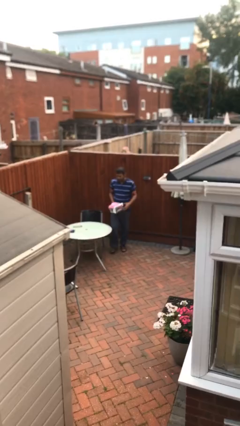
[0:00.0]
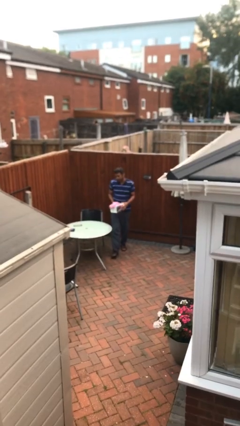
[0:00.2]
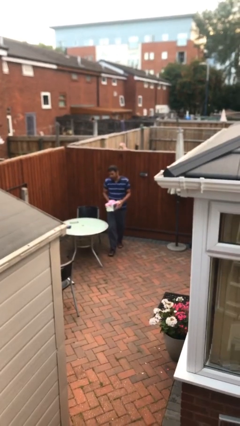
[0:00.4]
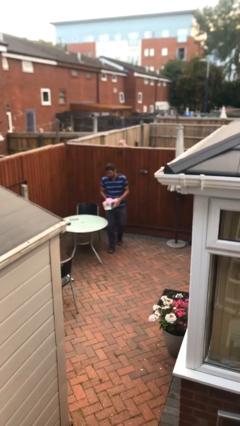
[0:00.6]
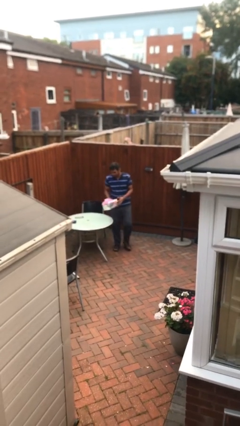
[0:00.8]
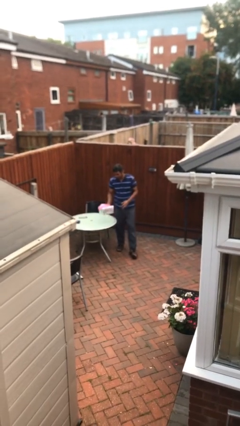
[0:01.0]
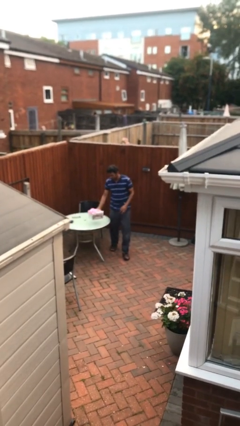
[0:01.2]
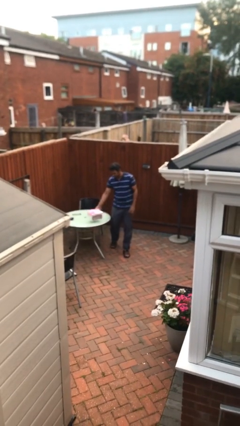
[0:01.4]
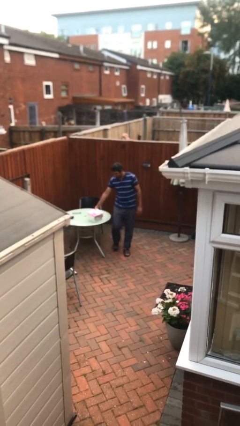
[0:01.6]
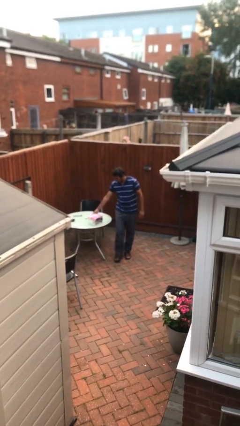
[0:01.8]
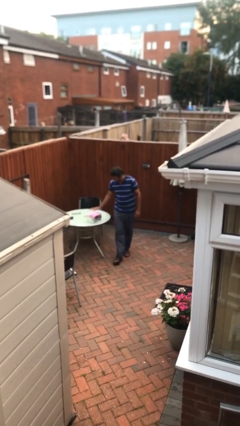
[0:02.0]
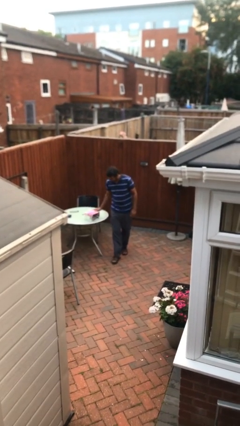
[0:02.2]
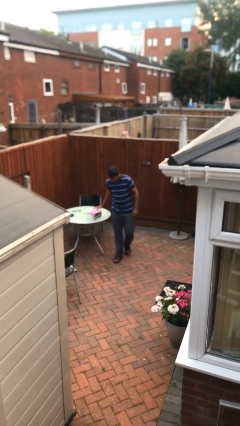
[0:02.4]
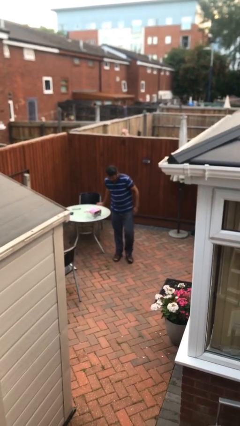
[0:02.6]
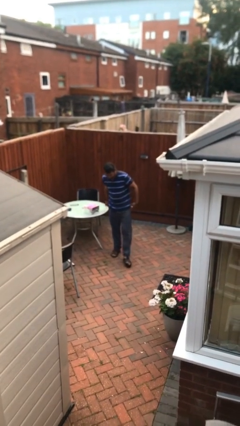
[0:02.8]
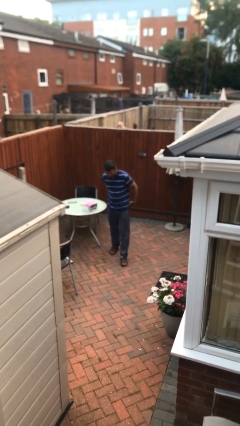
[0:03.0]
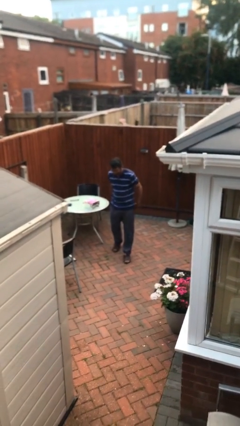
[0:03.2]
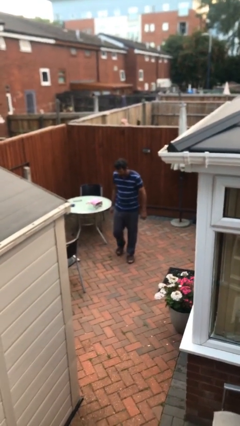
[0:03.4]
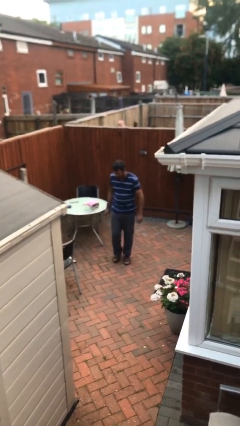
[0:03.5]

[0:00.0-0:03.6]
person puts down object on table

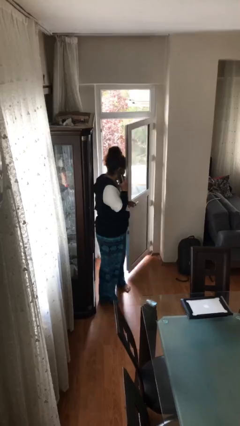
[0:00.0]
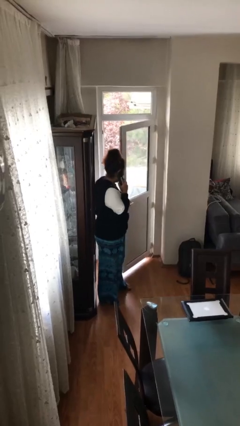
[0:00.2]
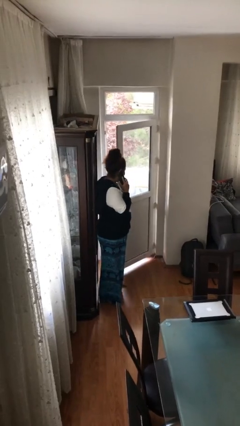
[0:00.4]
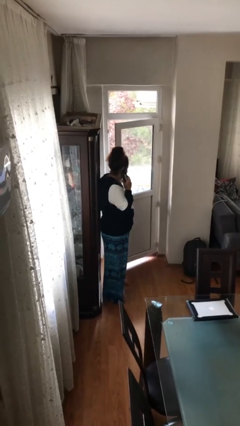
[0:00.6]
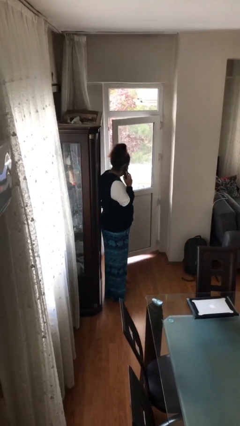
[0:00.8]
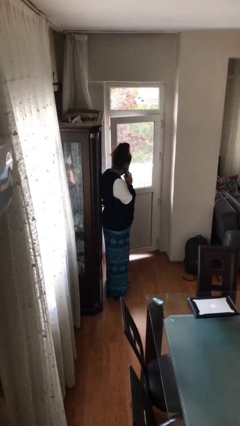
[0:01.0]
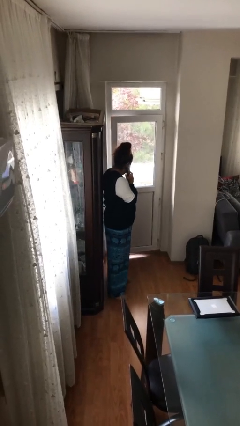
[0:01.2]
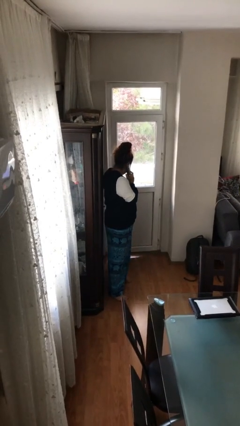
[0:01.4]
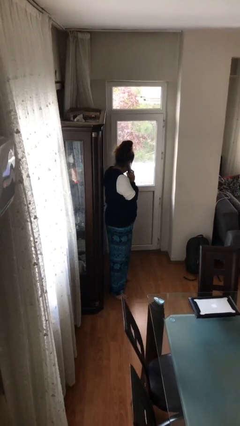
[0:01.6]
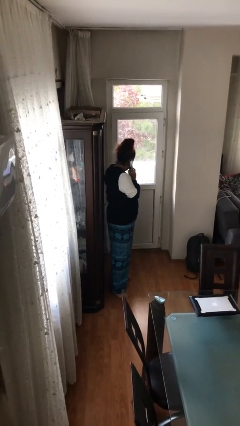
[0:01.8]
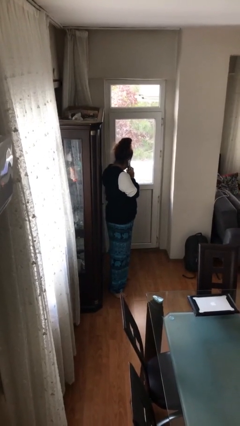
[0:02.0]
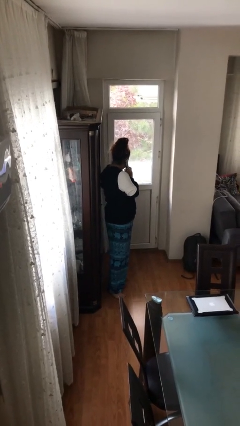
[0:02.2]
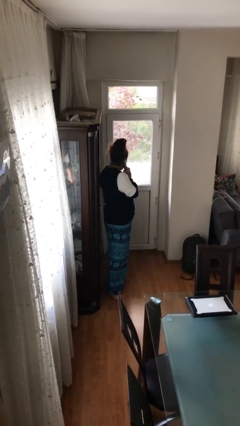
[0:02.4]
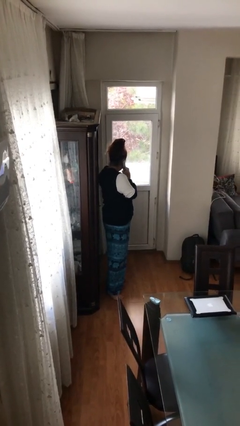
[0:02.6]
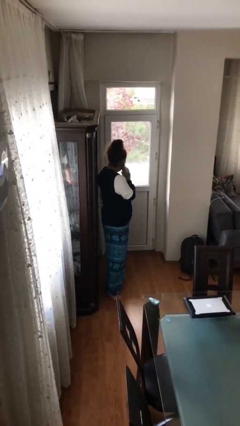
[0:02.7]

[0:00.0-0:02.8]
person closes facility door

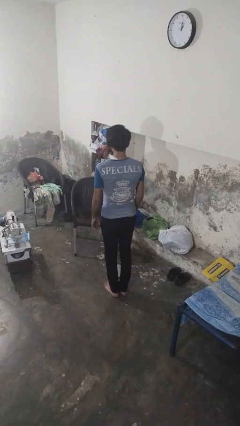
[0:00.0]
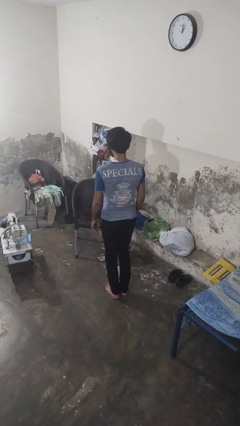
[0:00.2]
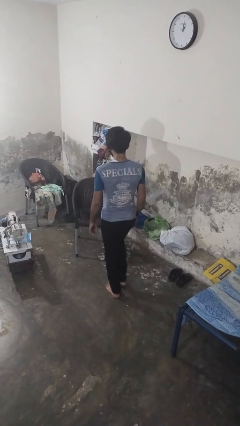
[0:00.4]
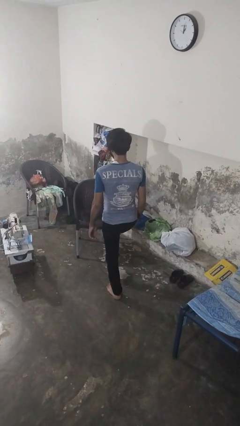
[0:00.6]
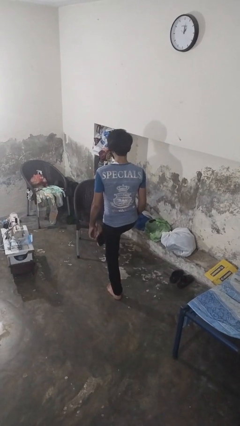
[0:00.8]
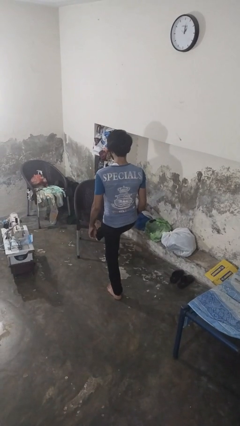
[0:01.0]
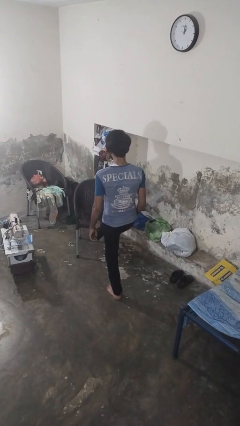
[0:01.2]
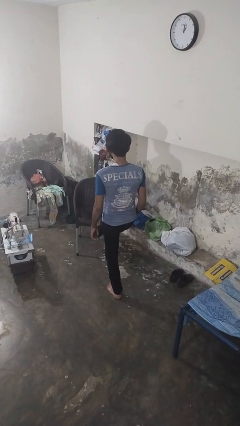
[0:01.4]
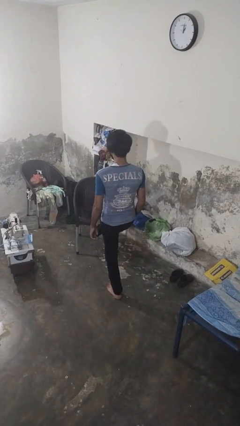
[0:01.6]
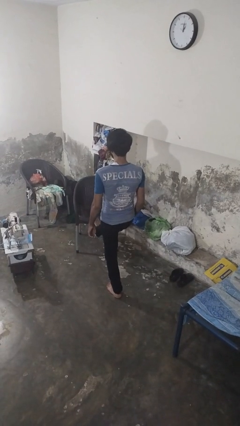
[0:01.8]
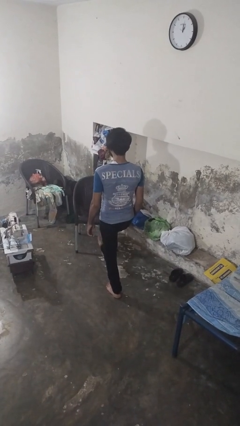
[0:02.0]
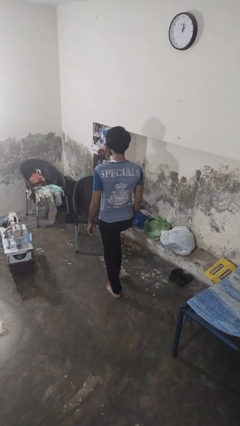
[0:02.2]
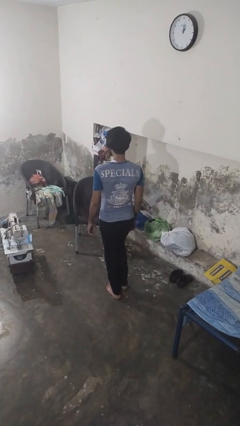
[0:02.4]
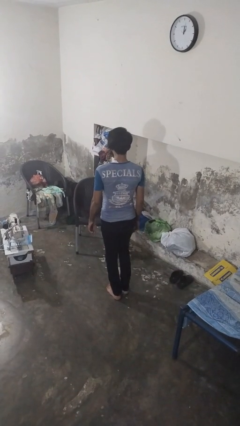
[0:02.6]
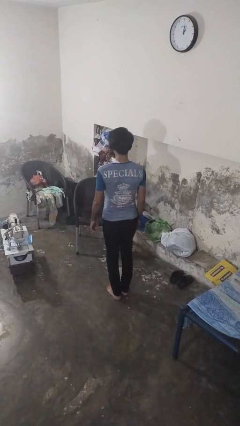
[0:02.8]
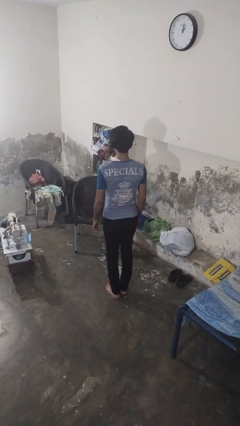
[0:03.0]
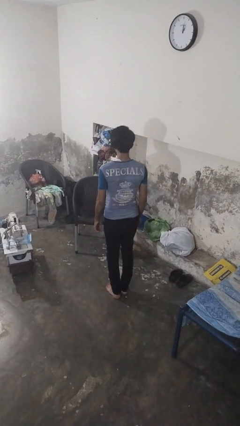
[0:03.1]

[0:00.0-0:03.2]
person stubs toe

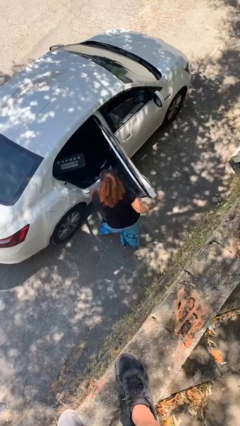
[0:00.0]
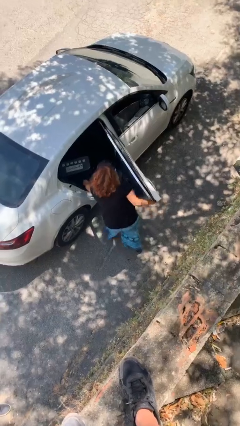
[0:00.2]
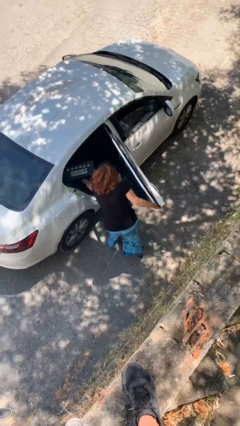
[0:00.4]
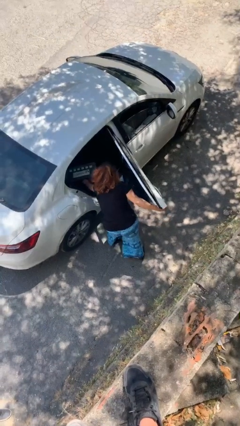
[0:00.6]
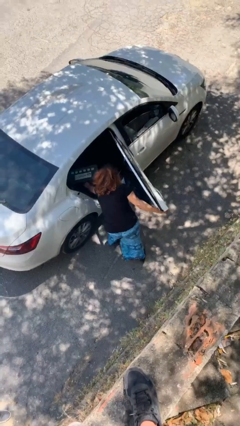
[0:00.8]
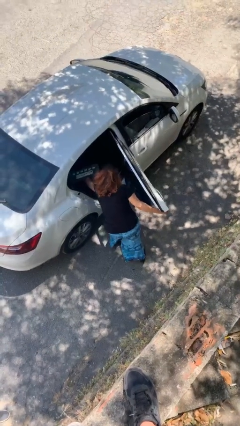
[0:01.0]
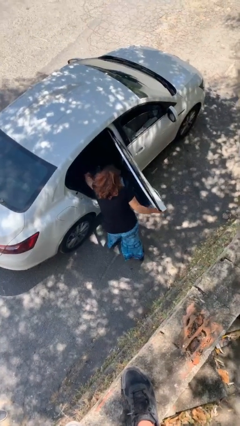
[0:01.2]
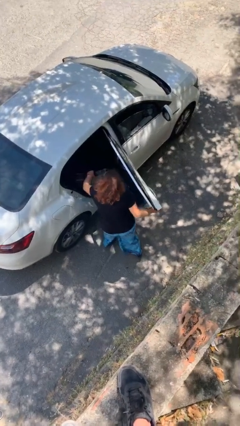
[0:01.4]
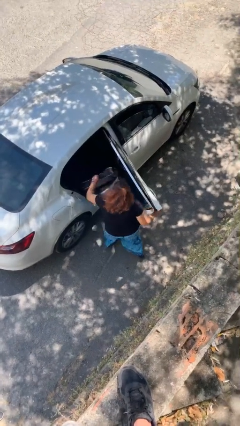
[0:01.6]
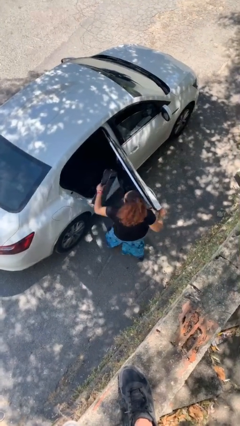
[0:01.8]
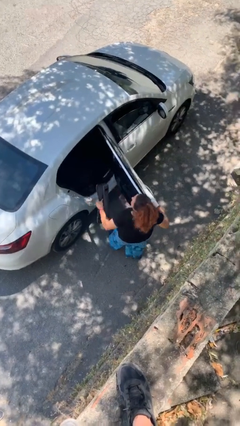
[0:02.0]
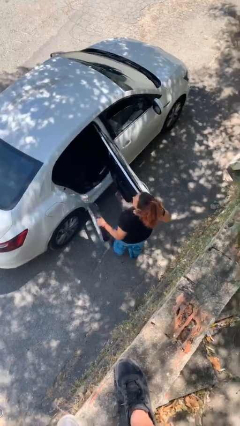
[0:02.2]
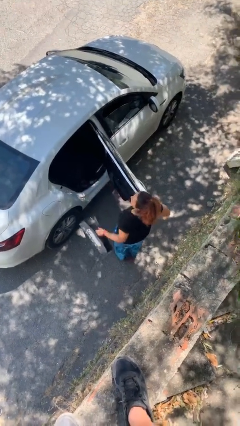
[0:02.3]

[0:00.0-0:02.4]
person unloads car

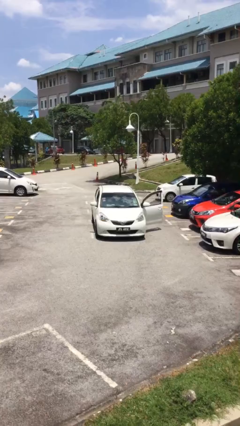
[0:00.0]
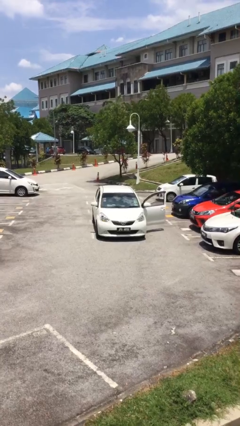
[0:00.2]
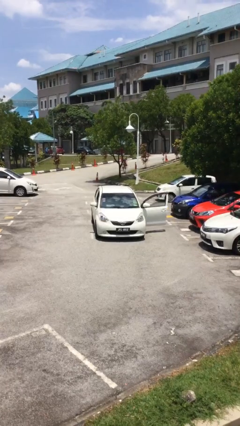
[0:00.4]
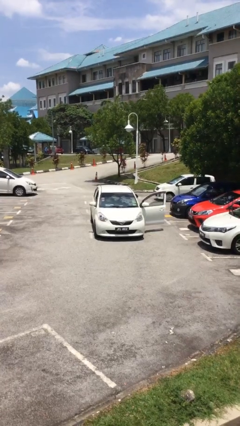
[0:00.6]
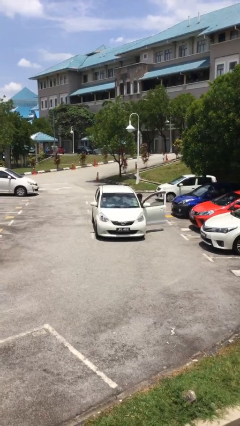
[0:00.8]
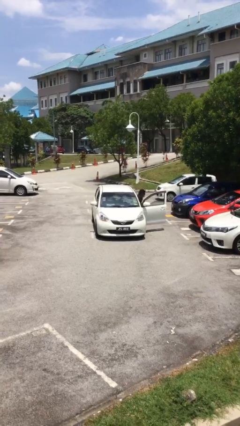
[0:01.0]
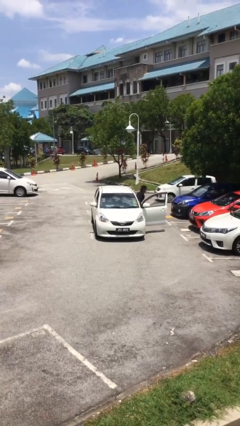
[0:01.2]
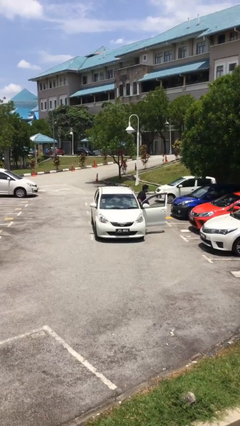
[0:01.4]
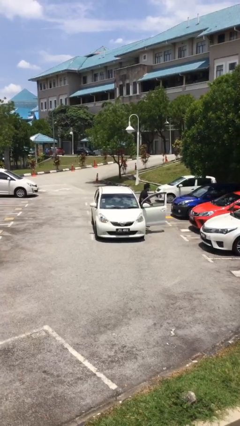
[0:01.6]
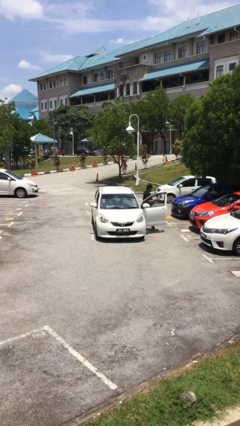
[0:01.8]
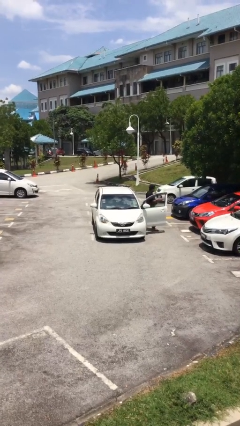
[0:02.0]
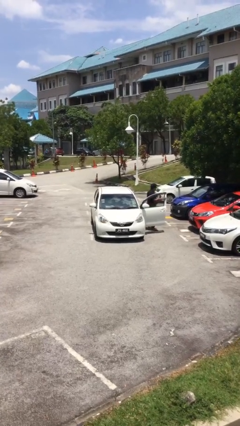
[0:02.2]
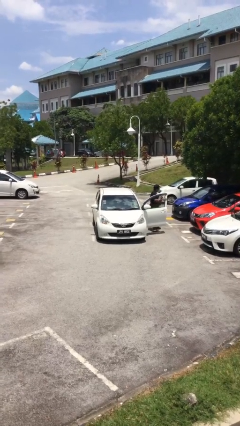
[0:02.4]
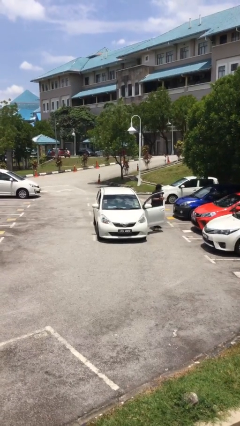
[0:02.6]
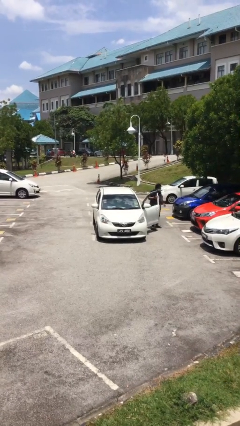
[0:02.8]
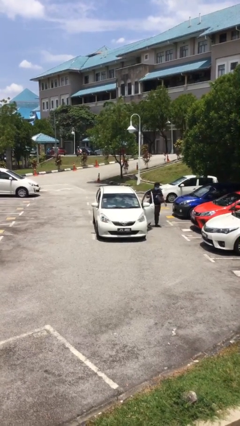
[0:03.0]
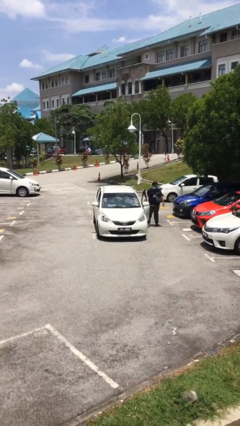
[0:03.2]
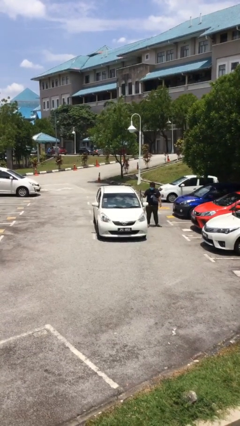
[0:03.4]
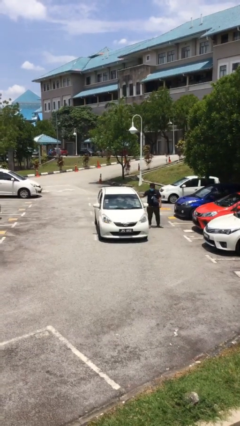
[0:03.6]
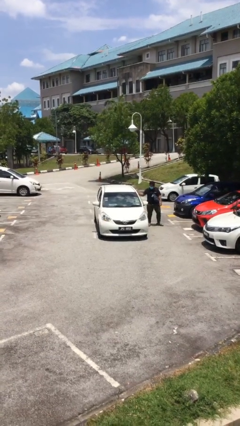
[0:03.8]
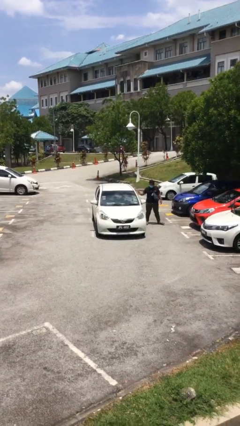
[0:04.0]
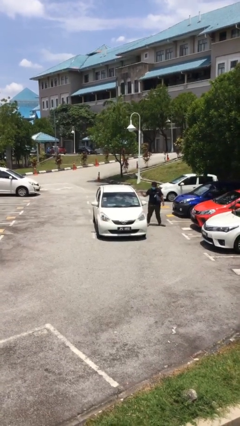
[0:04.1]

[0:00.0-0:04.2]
car drops off person

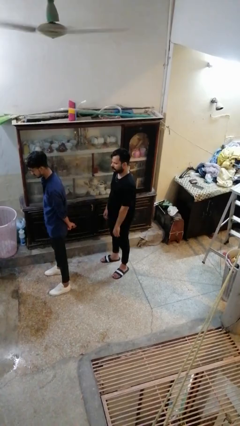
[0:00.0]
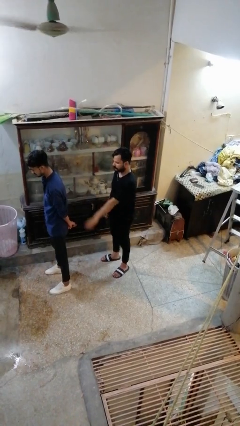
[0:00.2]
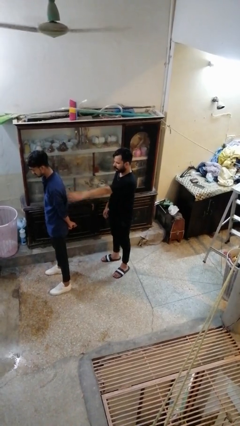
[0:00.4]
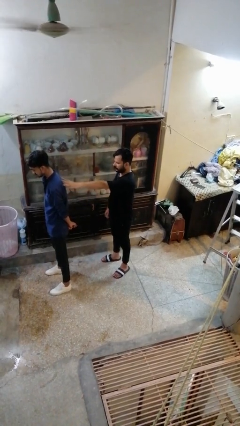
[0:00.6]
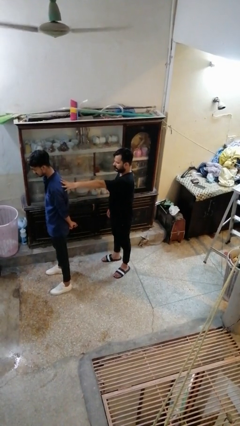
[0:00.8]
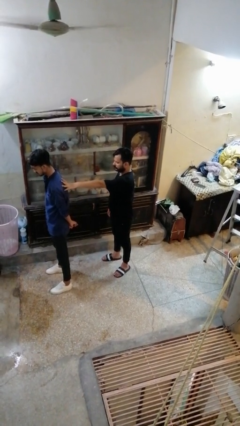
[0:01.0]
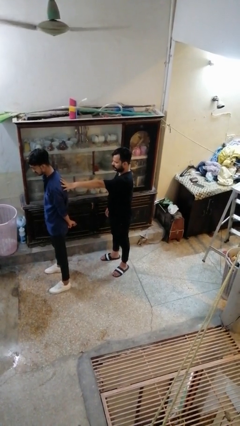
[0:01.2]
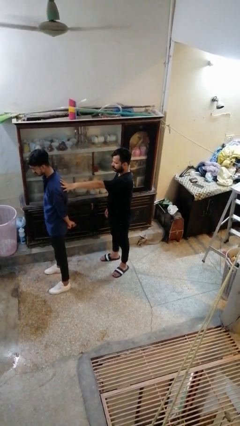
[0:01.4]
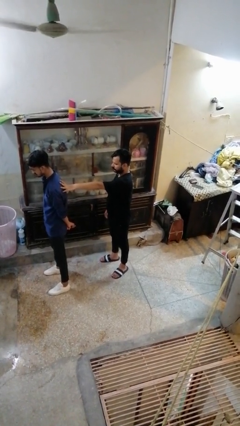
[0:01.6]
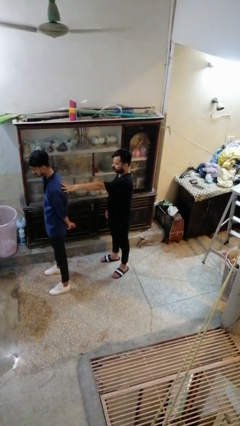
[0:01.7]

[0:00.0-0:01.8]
person touches back of person
